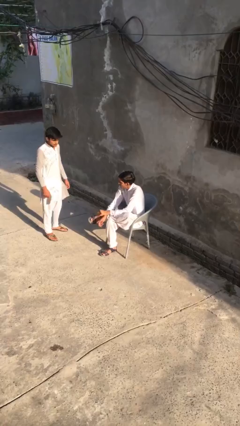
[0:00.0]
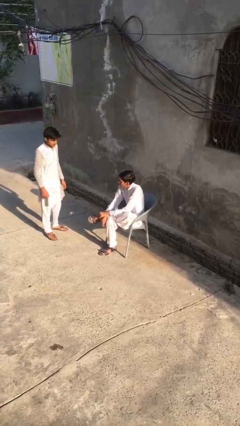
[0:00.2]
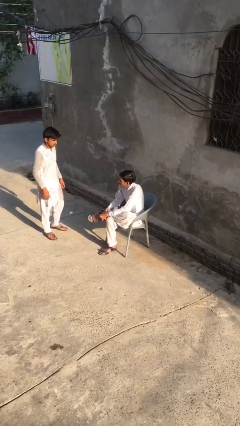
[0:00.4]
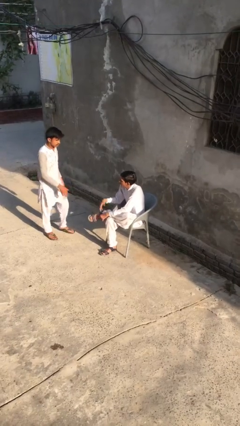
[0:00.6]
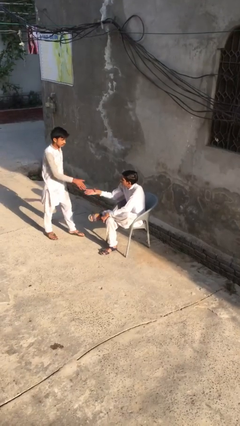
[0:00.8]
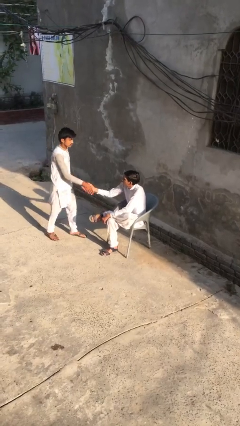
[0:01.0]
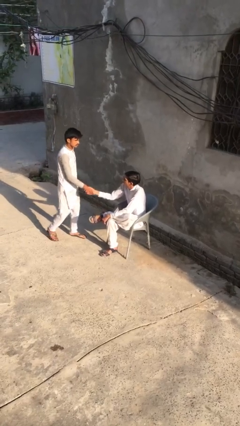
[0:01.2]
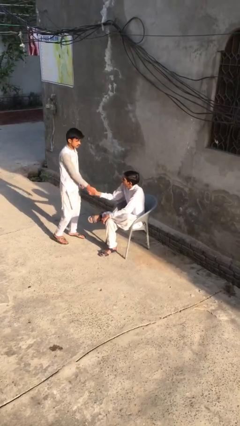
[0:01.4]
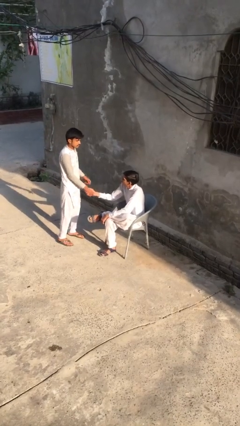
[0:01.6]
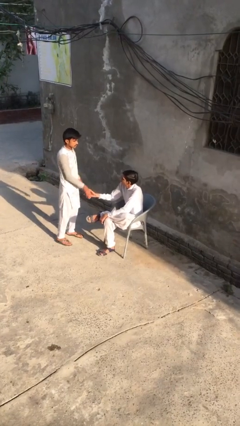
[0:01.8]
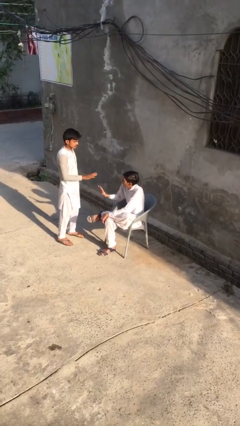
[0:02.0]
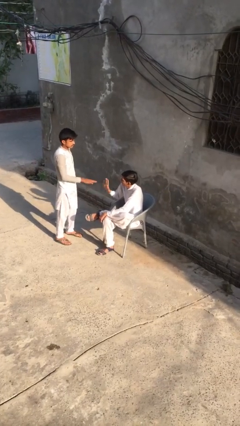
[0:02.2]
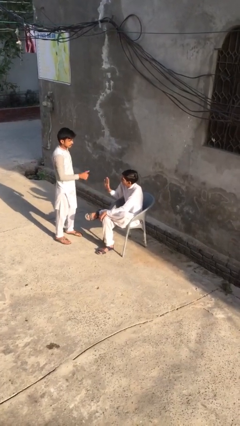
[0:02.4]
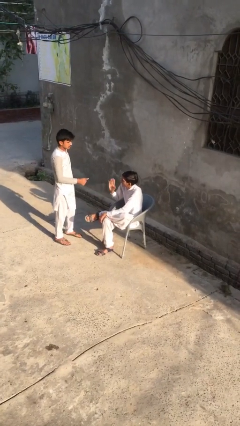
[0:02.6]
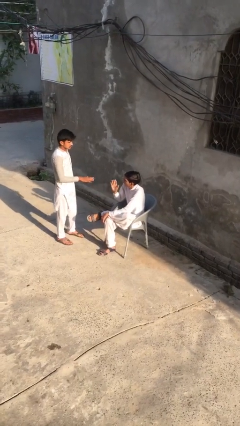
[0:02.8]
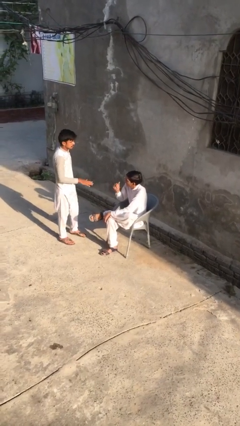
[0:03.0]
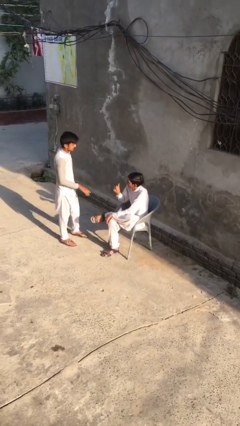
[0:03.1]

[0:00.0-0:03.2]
person shakes hand

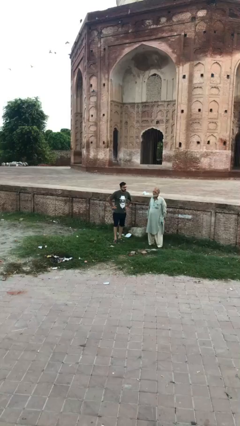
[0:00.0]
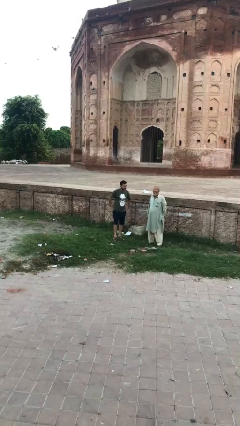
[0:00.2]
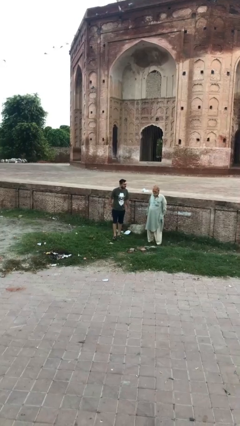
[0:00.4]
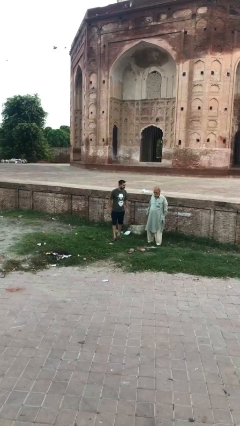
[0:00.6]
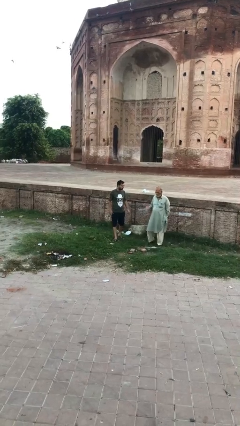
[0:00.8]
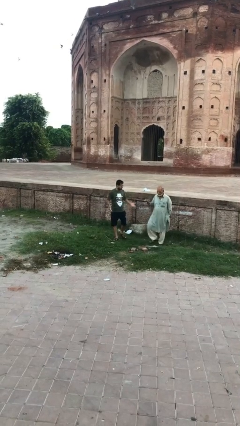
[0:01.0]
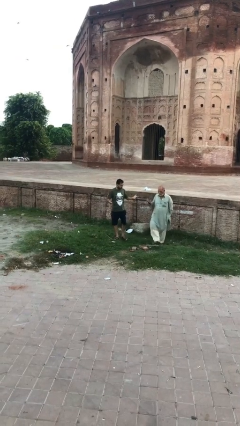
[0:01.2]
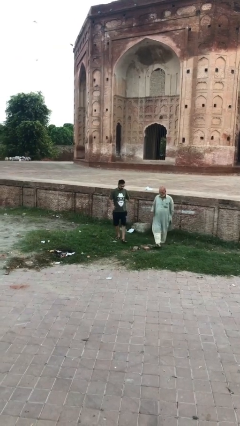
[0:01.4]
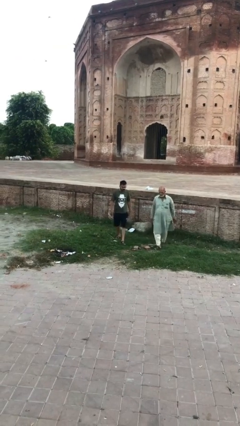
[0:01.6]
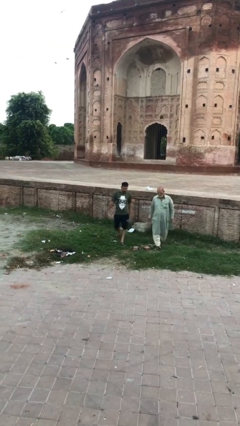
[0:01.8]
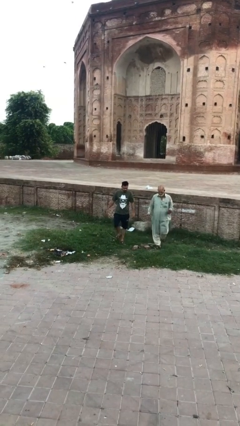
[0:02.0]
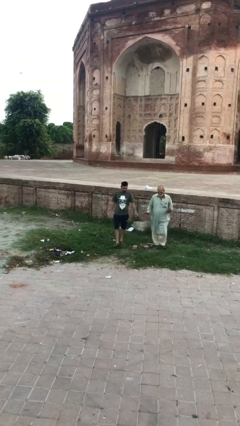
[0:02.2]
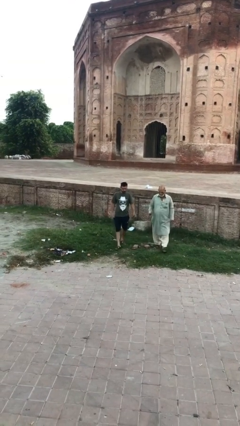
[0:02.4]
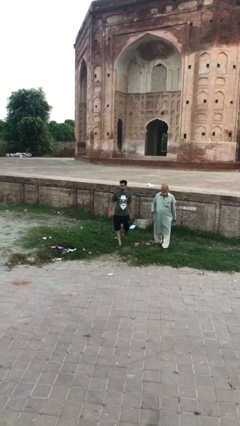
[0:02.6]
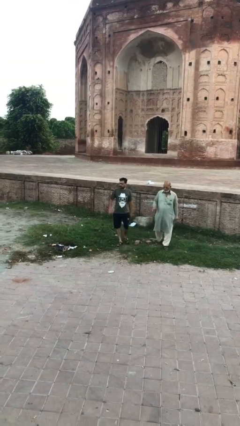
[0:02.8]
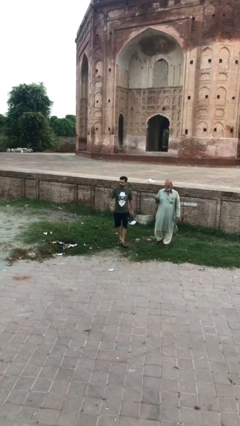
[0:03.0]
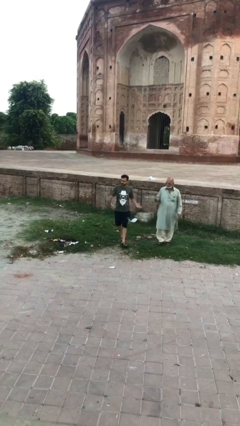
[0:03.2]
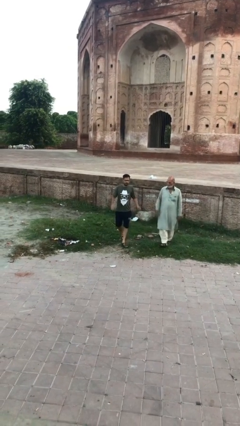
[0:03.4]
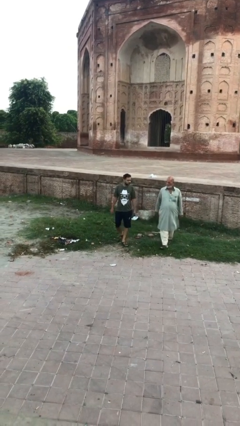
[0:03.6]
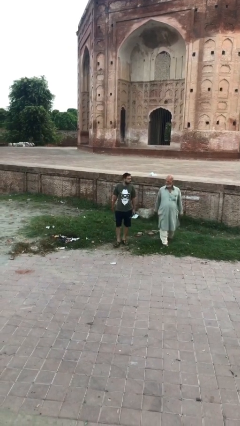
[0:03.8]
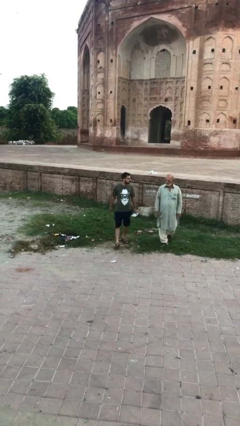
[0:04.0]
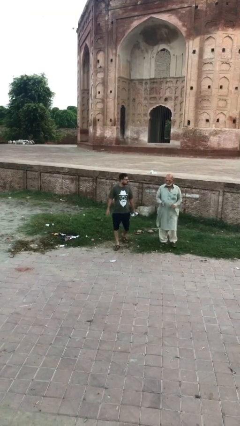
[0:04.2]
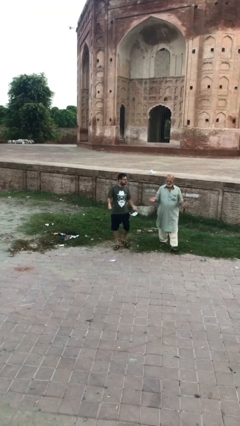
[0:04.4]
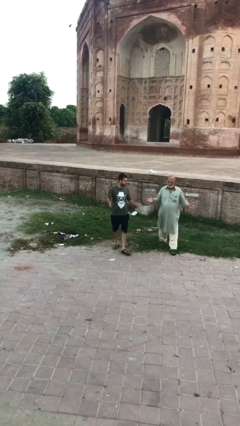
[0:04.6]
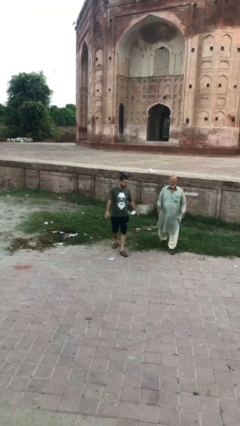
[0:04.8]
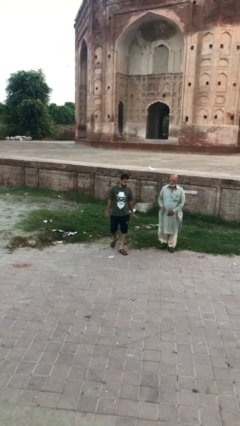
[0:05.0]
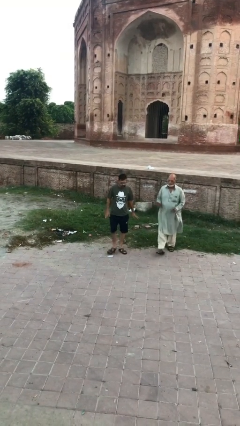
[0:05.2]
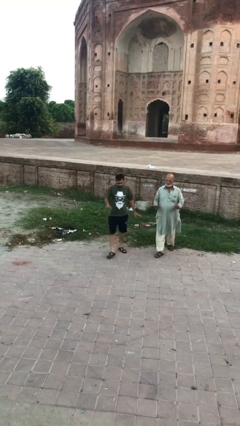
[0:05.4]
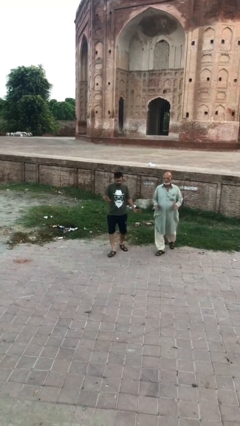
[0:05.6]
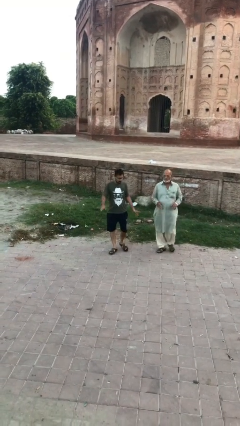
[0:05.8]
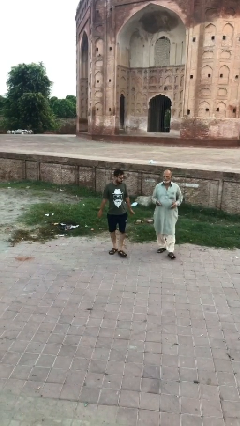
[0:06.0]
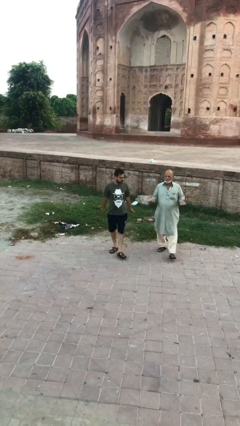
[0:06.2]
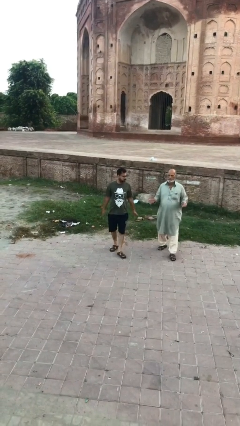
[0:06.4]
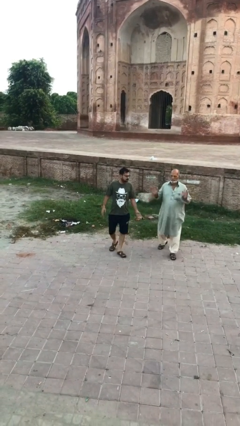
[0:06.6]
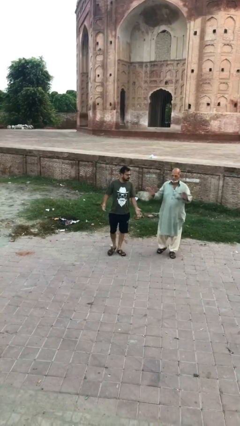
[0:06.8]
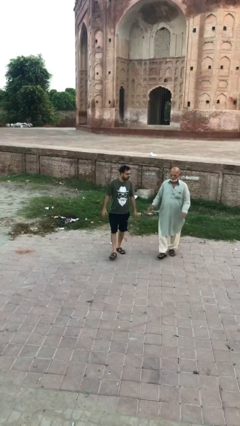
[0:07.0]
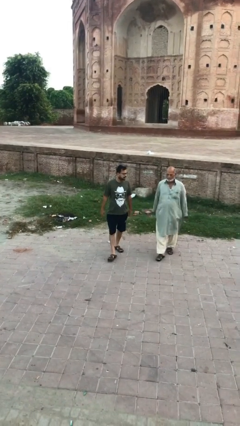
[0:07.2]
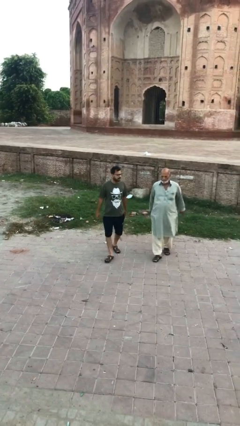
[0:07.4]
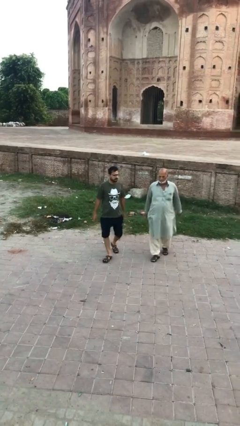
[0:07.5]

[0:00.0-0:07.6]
person talks to person

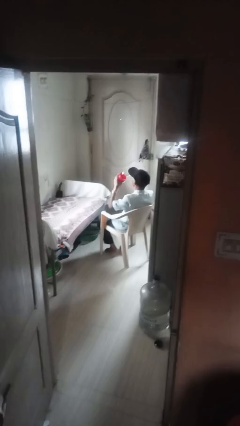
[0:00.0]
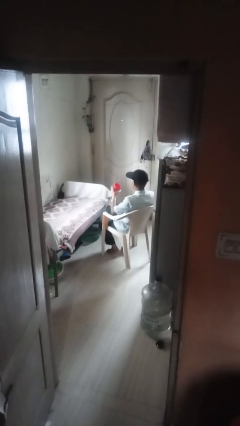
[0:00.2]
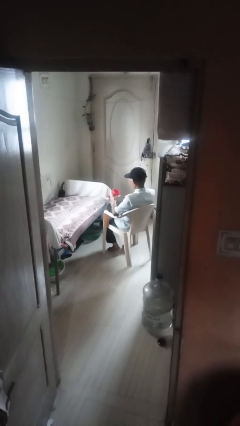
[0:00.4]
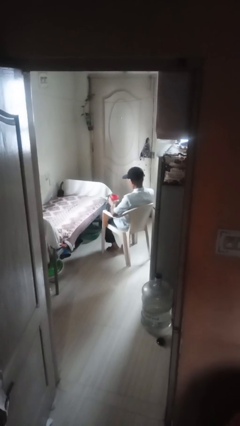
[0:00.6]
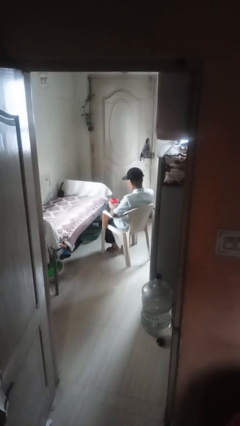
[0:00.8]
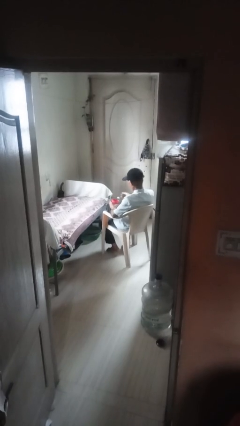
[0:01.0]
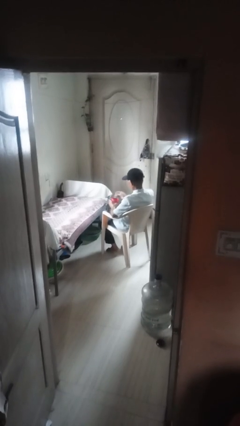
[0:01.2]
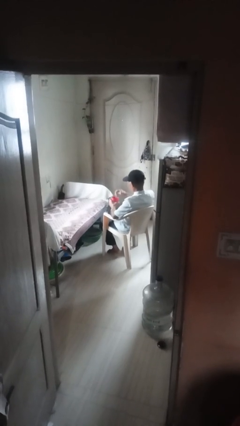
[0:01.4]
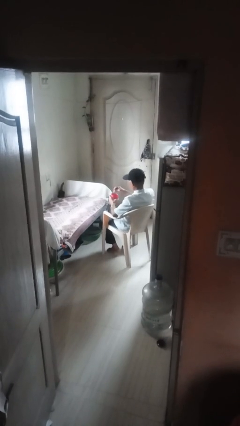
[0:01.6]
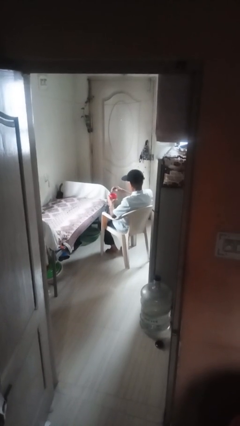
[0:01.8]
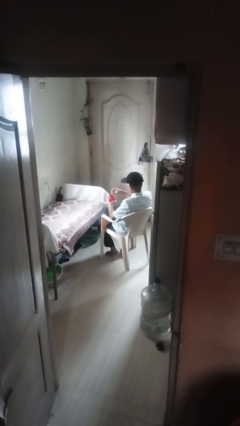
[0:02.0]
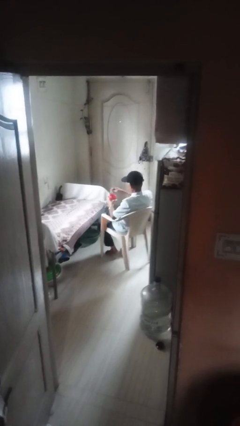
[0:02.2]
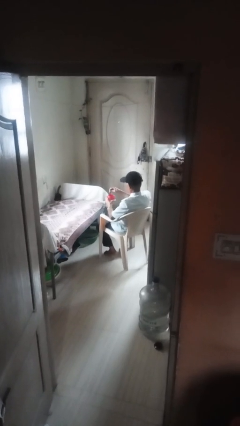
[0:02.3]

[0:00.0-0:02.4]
person stirs mug

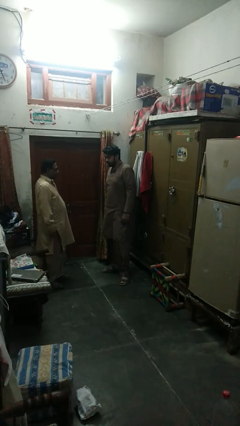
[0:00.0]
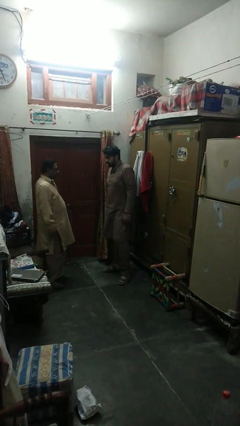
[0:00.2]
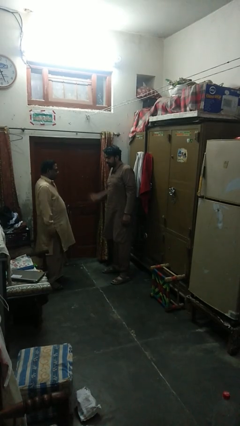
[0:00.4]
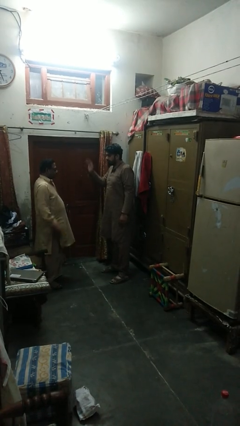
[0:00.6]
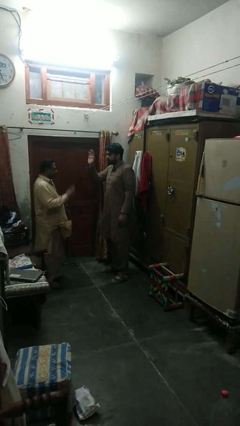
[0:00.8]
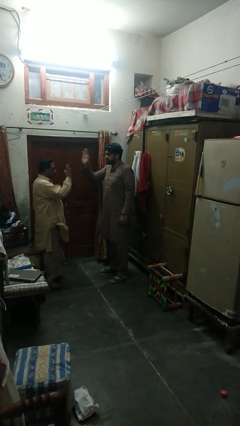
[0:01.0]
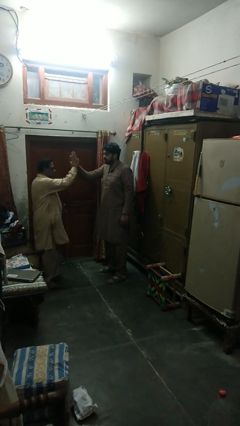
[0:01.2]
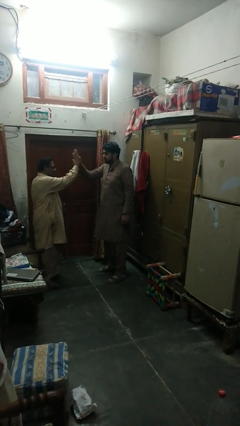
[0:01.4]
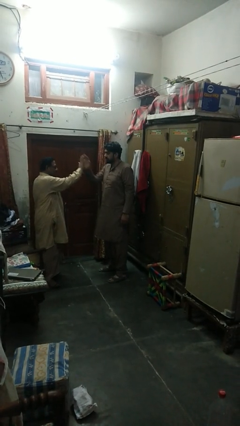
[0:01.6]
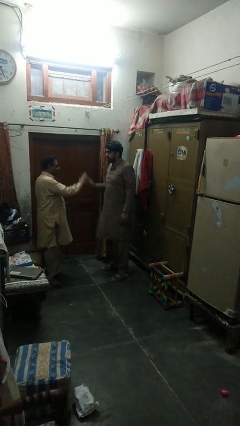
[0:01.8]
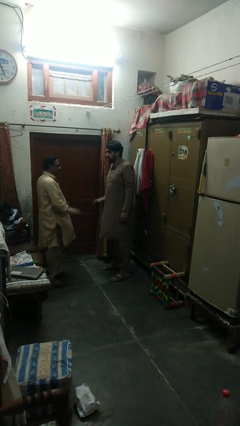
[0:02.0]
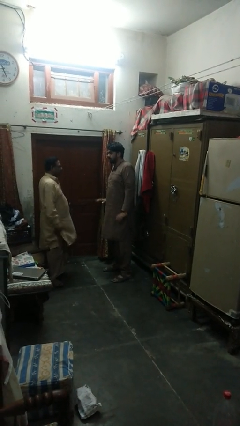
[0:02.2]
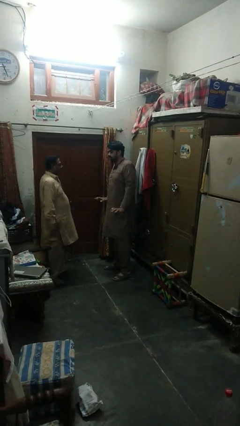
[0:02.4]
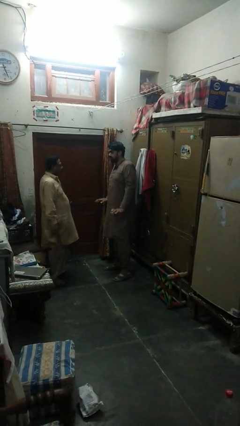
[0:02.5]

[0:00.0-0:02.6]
person highfives hand

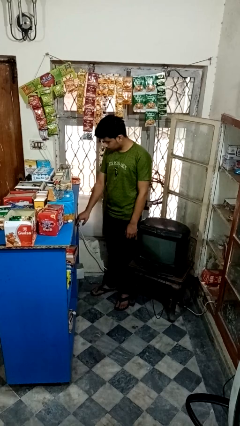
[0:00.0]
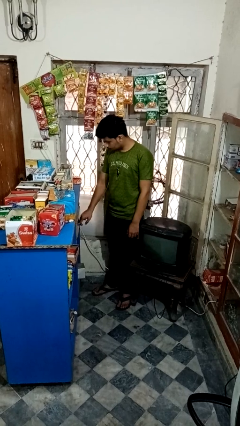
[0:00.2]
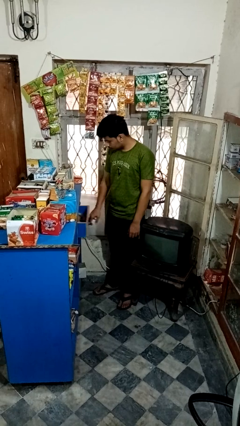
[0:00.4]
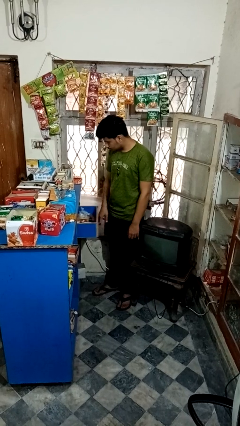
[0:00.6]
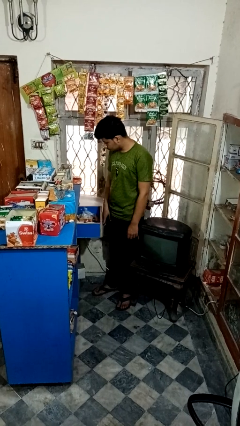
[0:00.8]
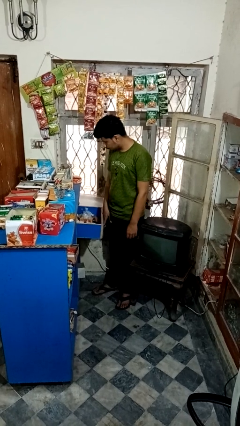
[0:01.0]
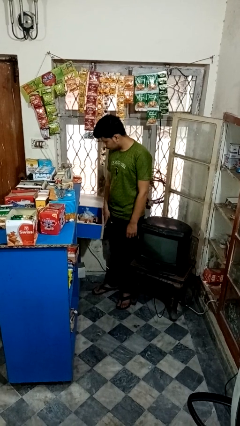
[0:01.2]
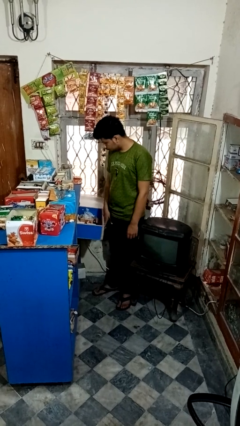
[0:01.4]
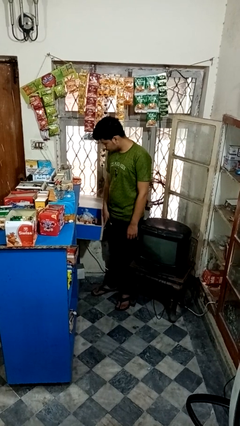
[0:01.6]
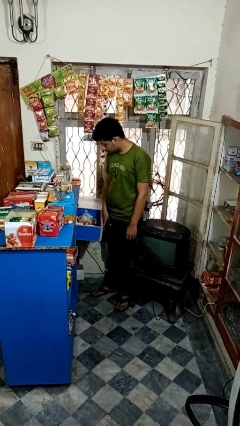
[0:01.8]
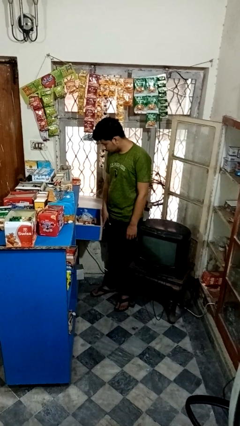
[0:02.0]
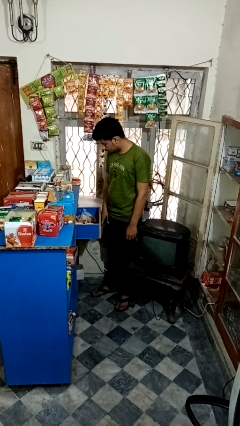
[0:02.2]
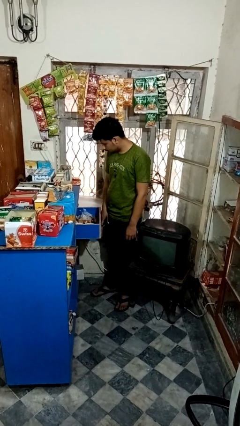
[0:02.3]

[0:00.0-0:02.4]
person opens kitchen drawer
